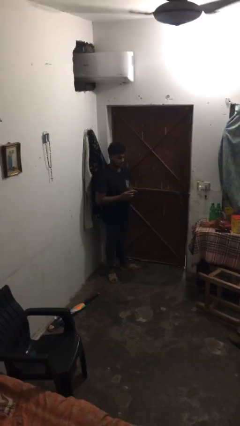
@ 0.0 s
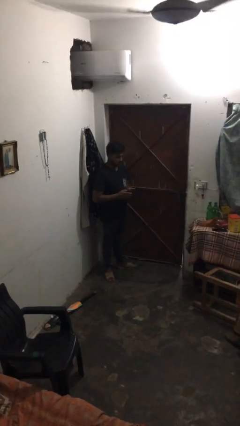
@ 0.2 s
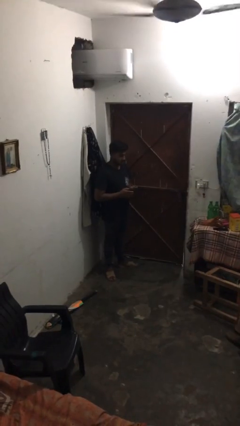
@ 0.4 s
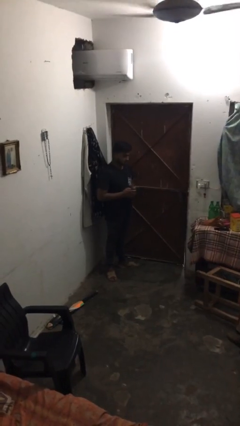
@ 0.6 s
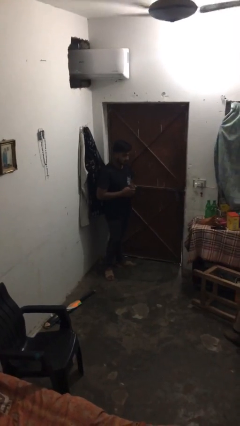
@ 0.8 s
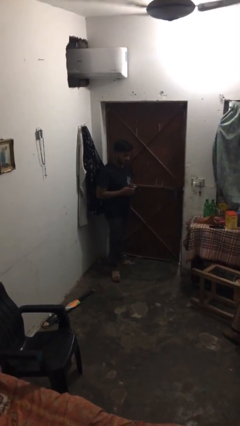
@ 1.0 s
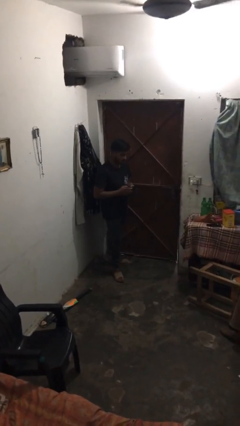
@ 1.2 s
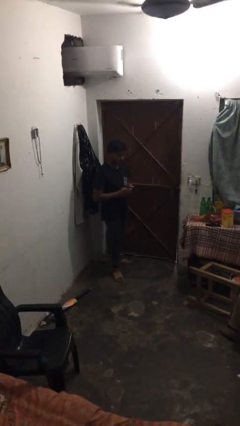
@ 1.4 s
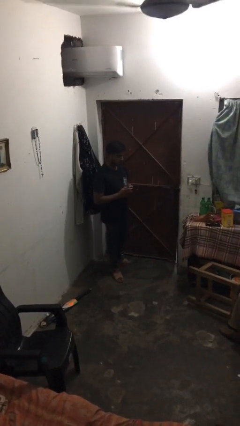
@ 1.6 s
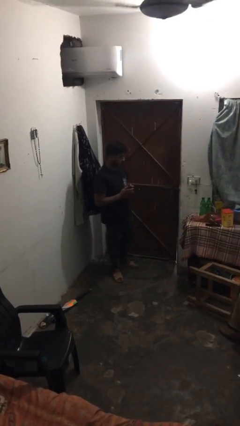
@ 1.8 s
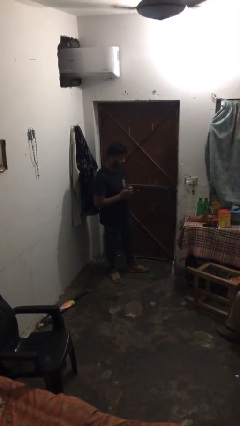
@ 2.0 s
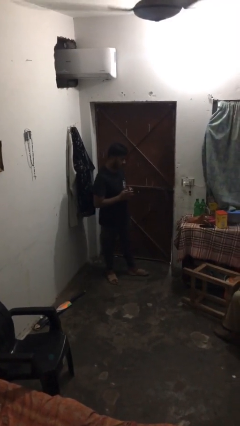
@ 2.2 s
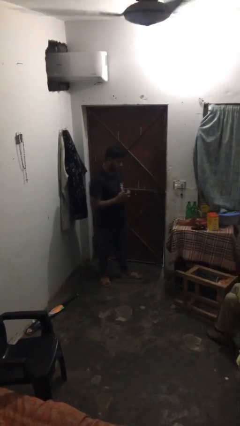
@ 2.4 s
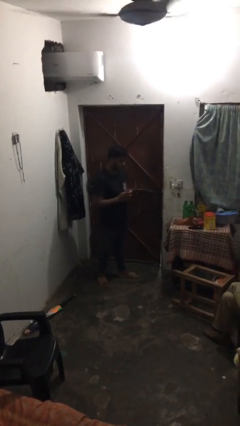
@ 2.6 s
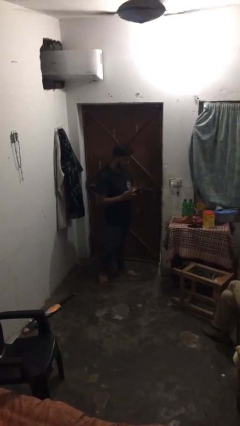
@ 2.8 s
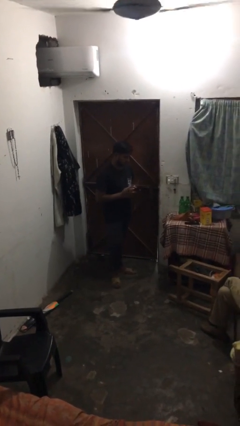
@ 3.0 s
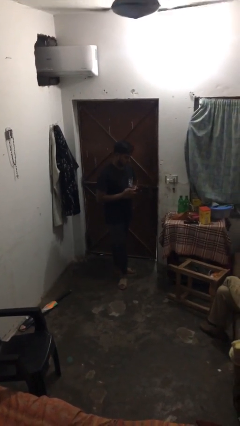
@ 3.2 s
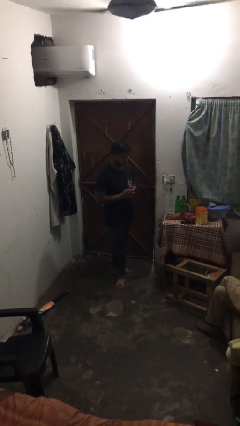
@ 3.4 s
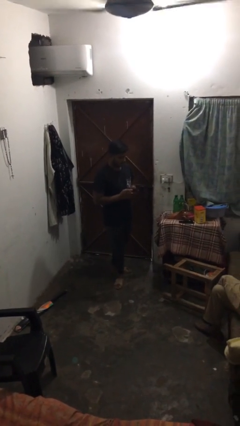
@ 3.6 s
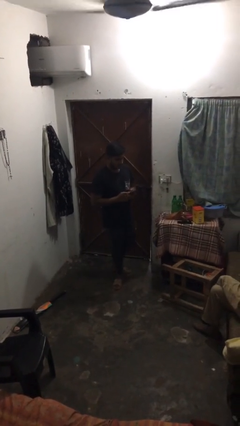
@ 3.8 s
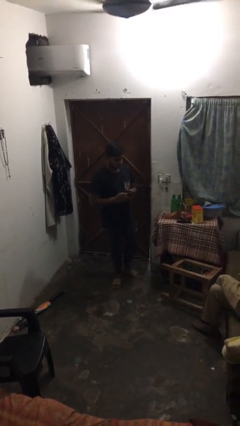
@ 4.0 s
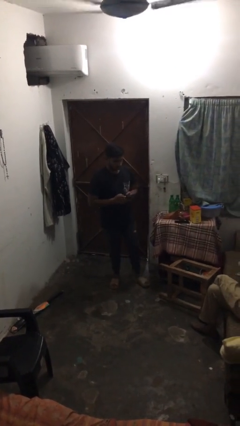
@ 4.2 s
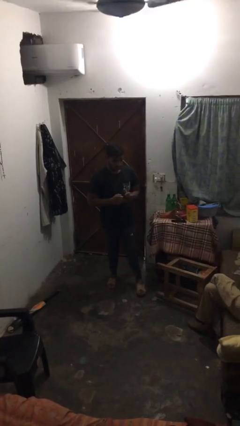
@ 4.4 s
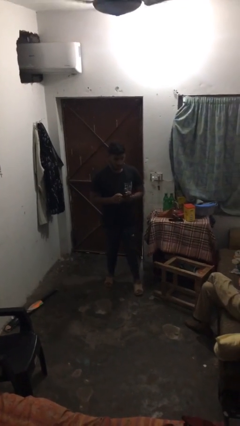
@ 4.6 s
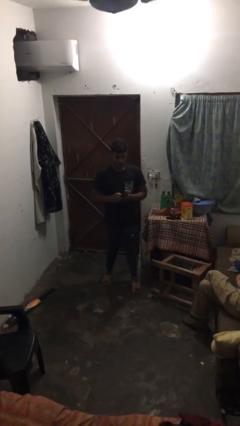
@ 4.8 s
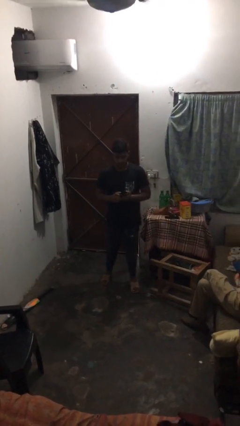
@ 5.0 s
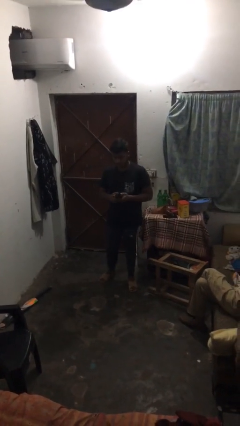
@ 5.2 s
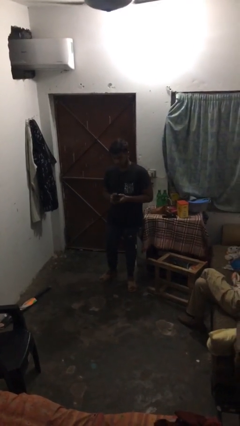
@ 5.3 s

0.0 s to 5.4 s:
person texts on phone

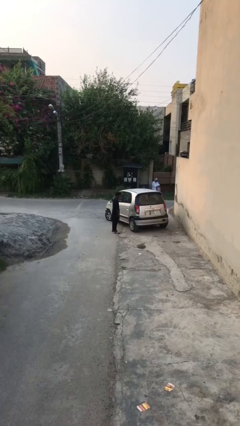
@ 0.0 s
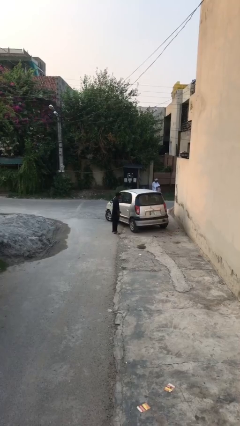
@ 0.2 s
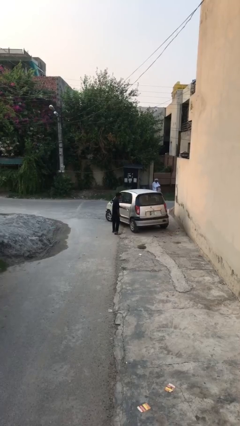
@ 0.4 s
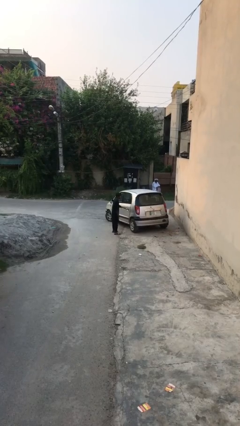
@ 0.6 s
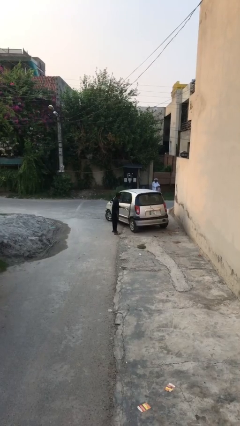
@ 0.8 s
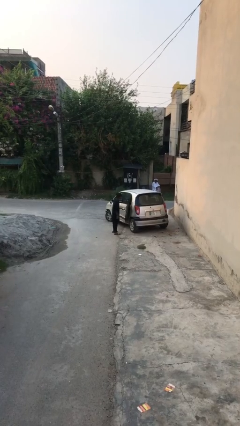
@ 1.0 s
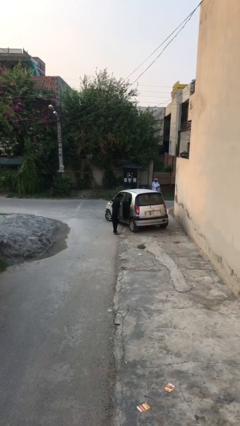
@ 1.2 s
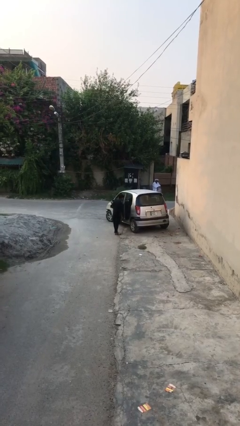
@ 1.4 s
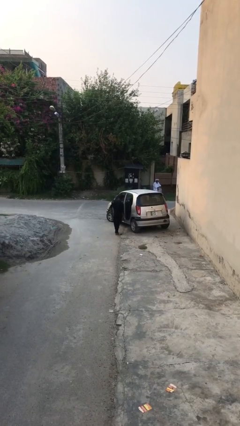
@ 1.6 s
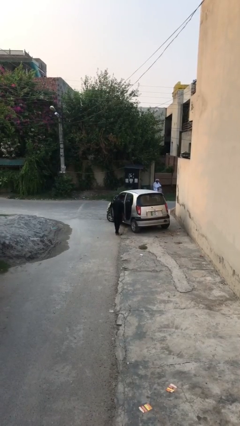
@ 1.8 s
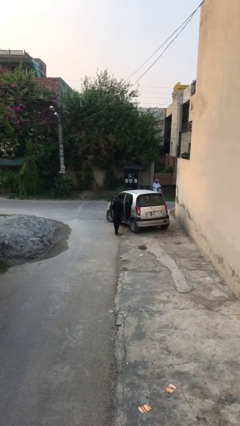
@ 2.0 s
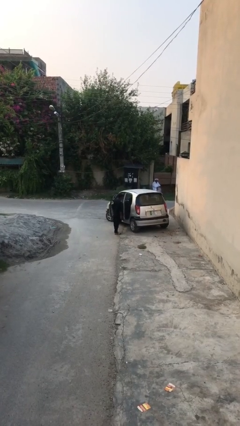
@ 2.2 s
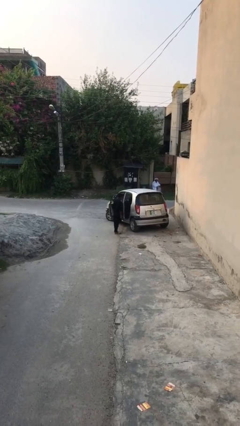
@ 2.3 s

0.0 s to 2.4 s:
person opens car door

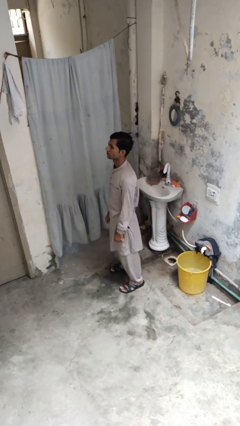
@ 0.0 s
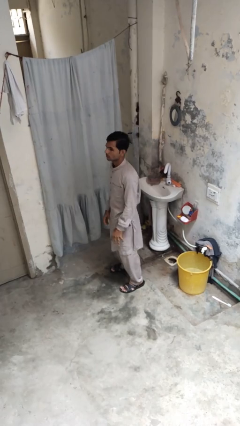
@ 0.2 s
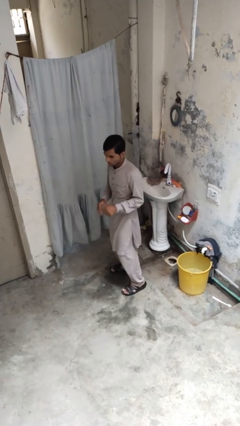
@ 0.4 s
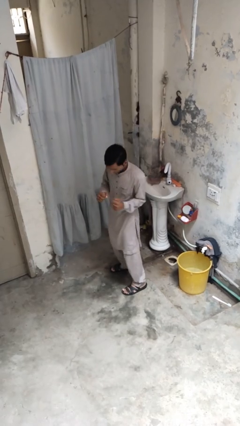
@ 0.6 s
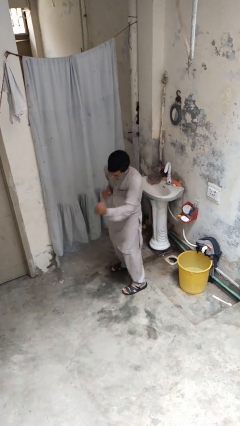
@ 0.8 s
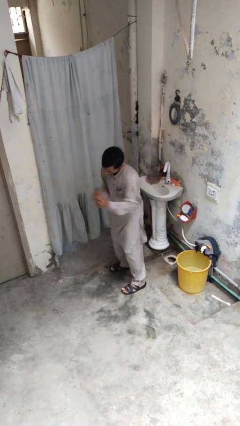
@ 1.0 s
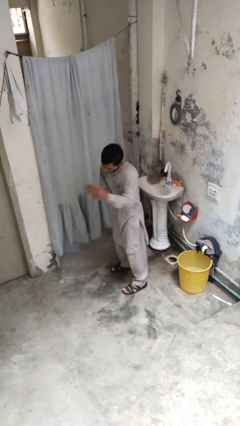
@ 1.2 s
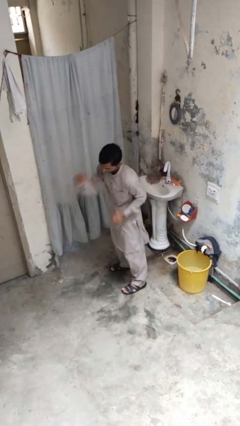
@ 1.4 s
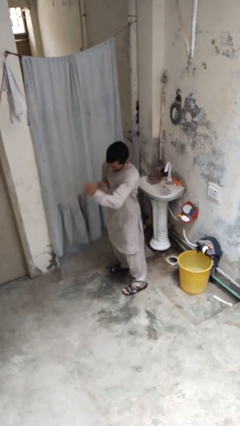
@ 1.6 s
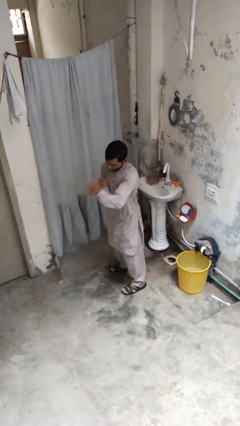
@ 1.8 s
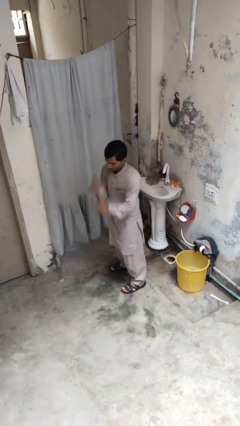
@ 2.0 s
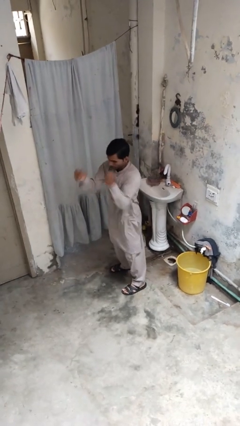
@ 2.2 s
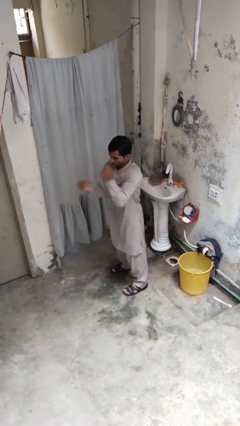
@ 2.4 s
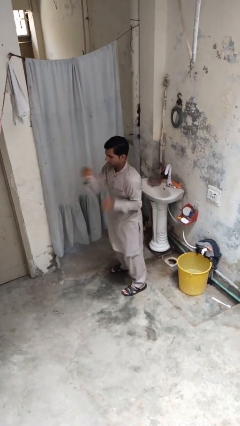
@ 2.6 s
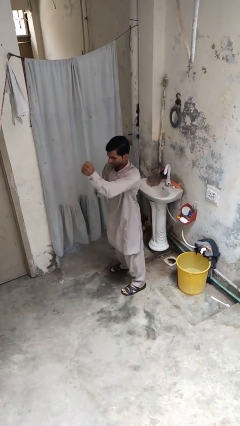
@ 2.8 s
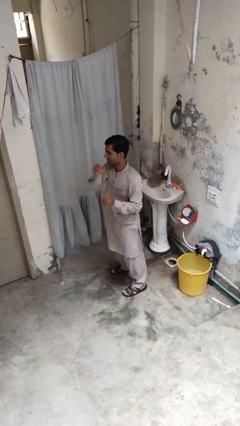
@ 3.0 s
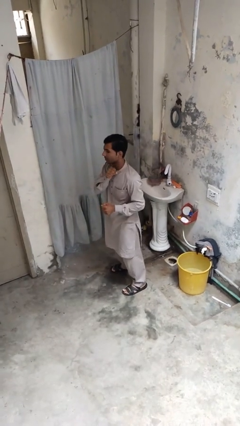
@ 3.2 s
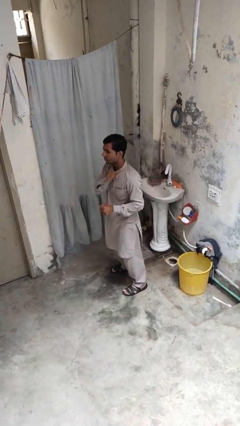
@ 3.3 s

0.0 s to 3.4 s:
person punches

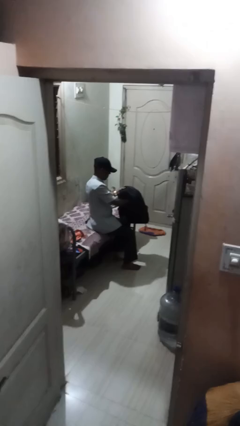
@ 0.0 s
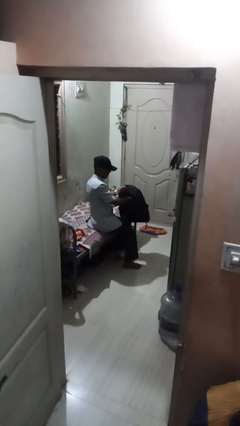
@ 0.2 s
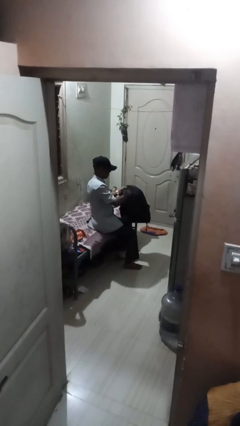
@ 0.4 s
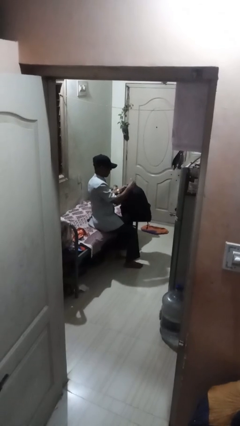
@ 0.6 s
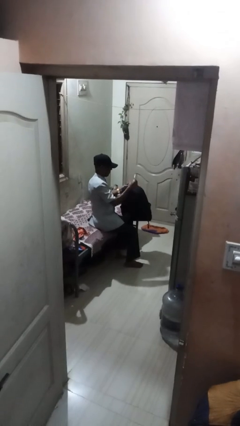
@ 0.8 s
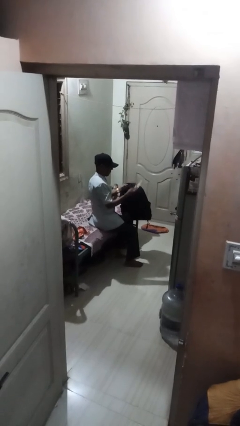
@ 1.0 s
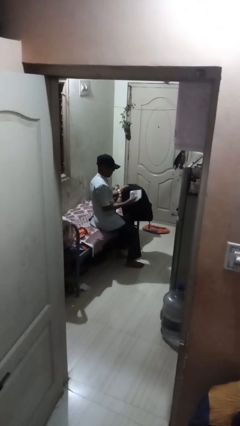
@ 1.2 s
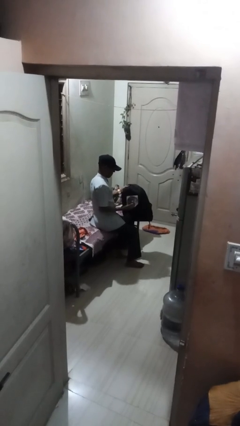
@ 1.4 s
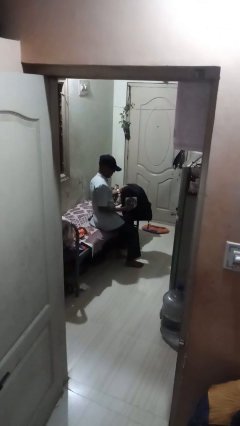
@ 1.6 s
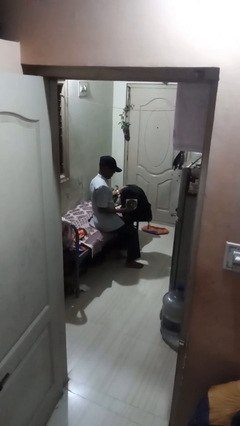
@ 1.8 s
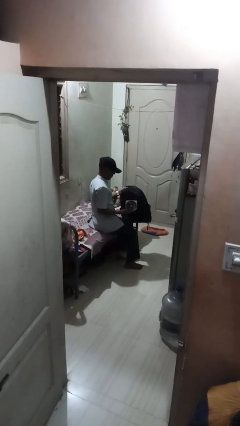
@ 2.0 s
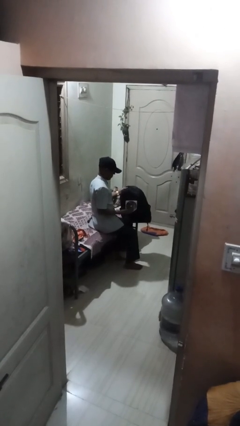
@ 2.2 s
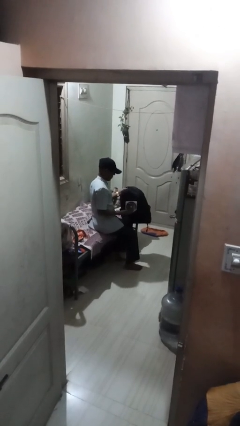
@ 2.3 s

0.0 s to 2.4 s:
person takes object from backpack

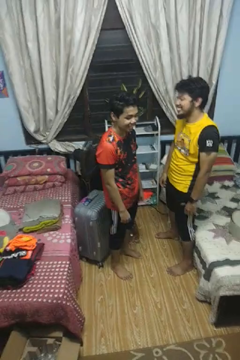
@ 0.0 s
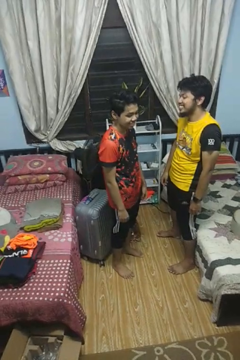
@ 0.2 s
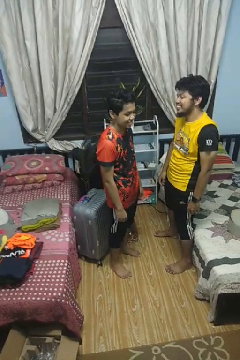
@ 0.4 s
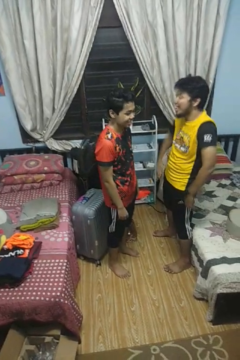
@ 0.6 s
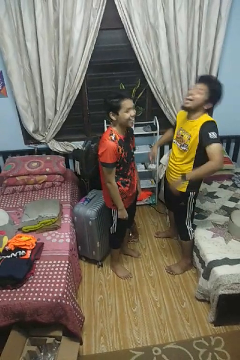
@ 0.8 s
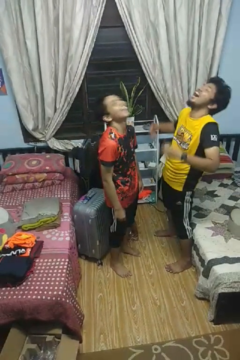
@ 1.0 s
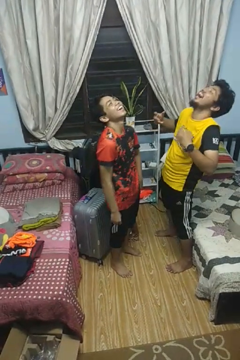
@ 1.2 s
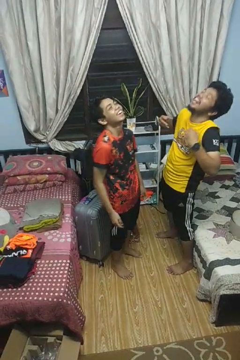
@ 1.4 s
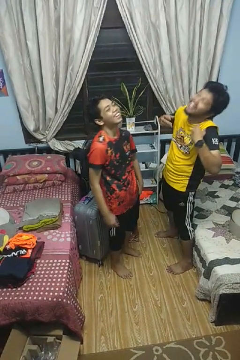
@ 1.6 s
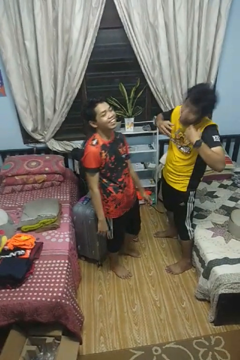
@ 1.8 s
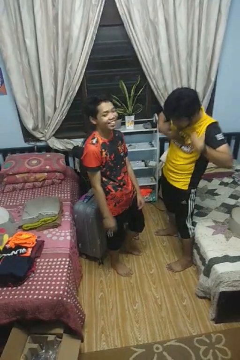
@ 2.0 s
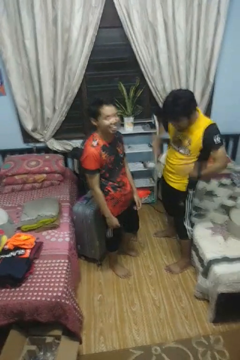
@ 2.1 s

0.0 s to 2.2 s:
person laughs with person

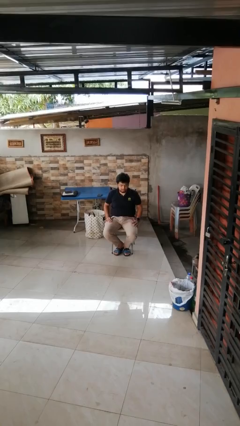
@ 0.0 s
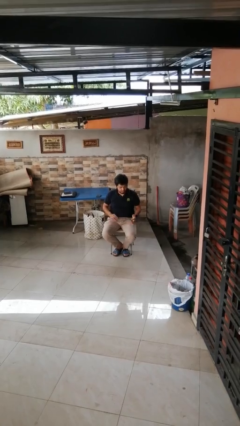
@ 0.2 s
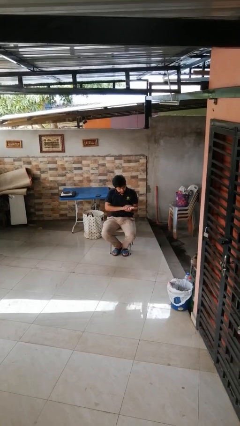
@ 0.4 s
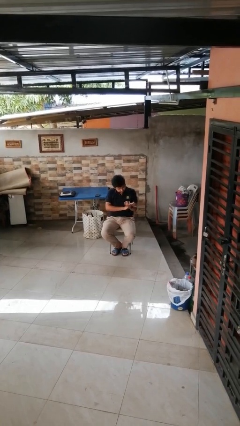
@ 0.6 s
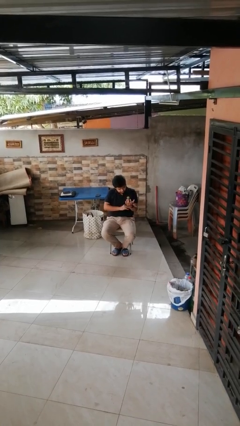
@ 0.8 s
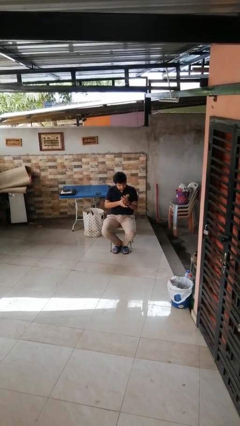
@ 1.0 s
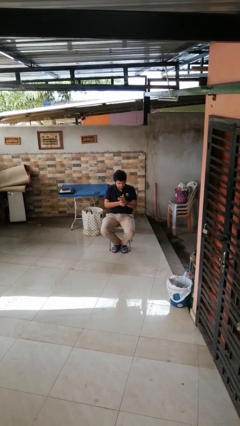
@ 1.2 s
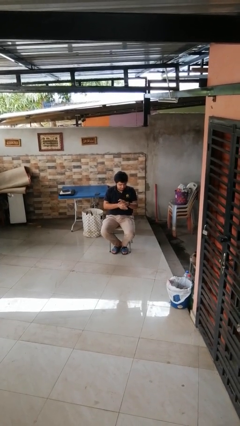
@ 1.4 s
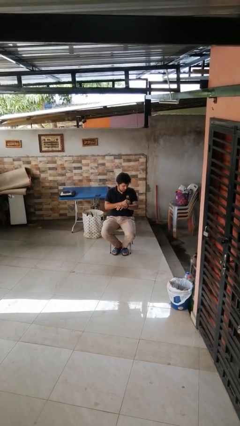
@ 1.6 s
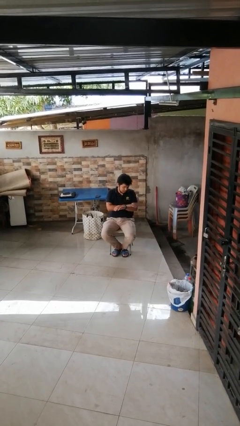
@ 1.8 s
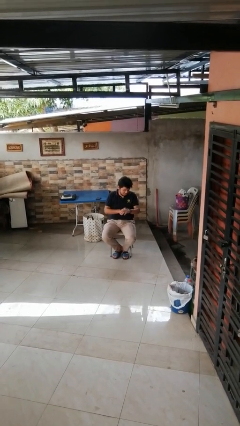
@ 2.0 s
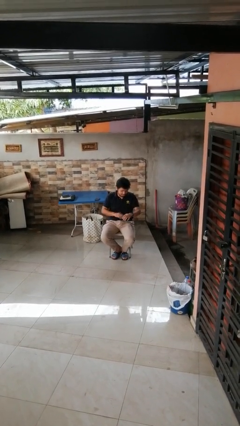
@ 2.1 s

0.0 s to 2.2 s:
person looks at hands in lap
